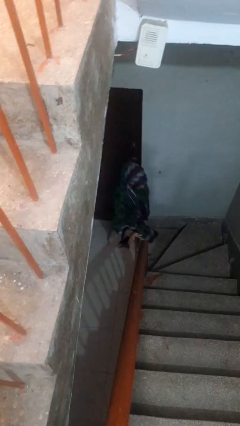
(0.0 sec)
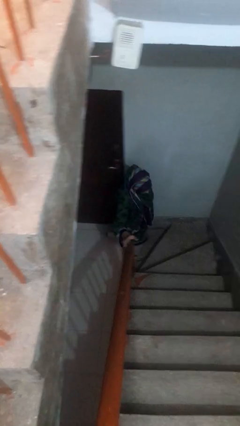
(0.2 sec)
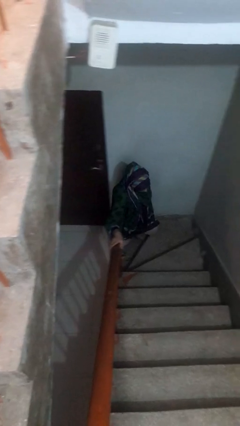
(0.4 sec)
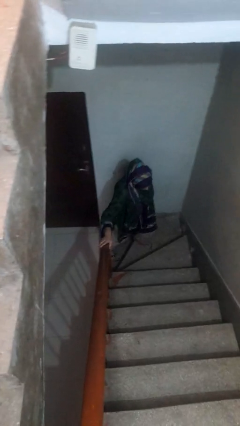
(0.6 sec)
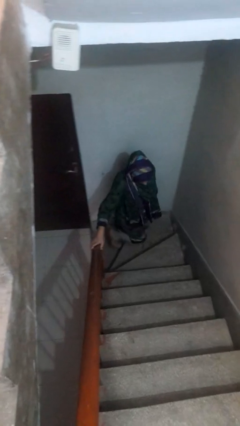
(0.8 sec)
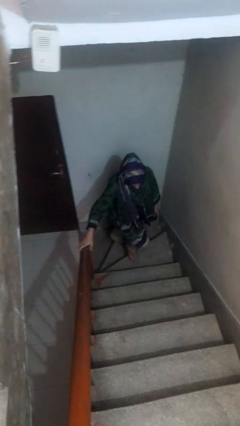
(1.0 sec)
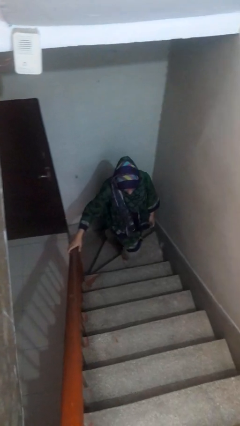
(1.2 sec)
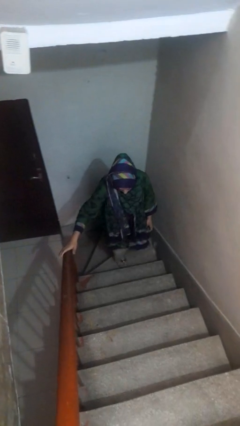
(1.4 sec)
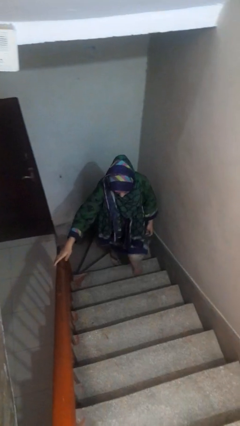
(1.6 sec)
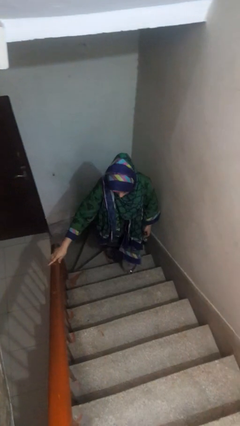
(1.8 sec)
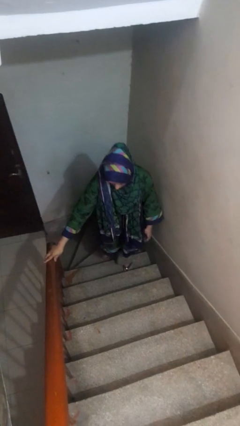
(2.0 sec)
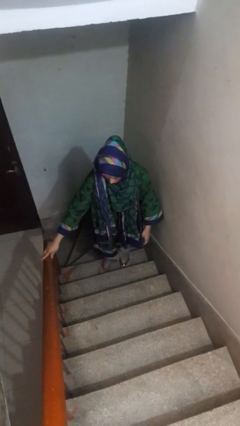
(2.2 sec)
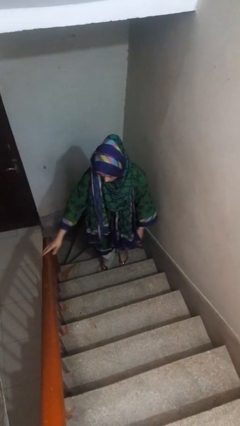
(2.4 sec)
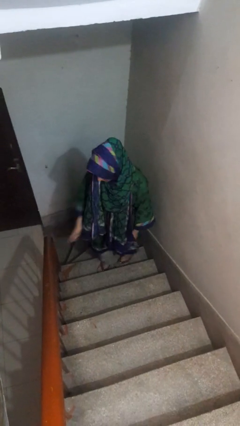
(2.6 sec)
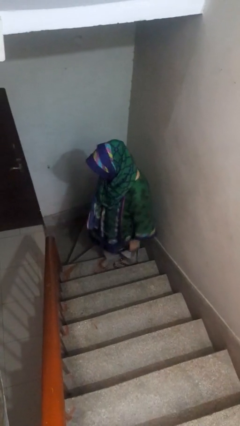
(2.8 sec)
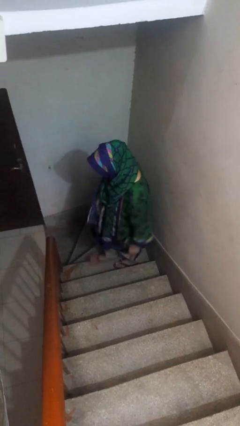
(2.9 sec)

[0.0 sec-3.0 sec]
person climbs up stairs

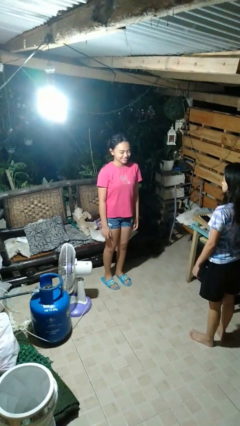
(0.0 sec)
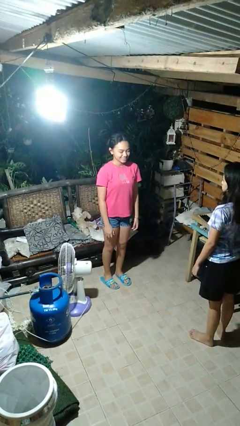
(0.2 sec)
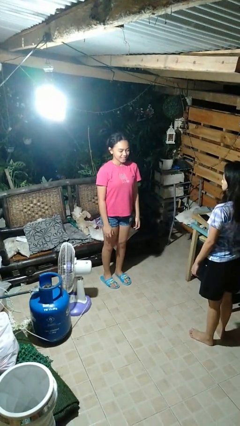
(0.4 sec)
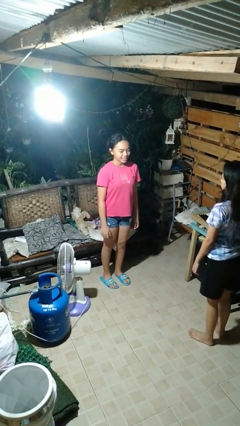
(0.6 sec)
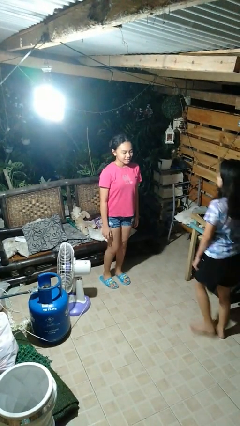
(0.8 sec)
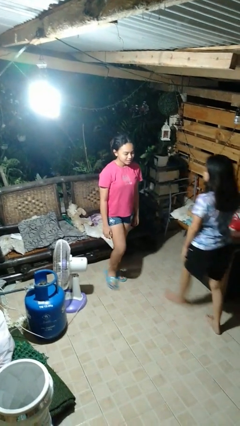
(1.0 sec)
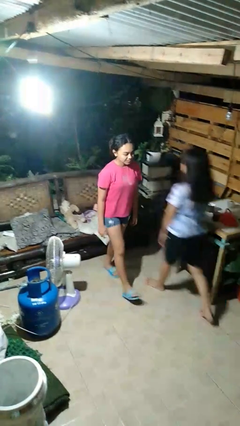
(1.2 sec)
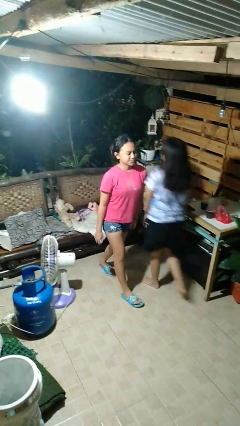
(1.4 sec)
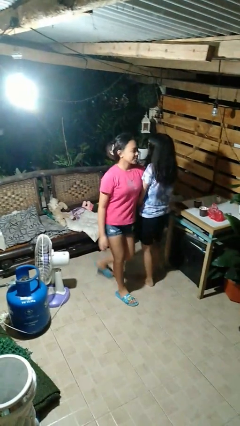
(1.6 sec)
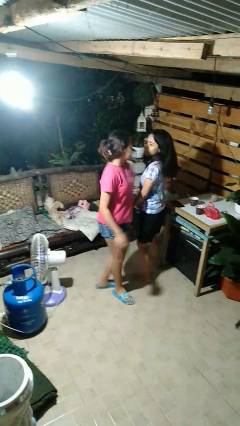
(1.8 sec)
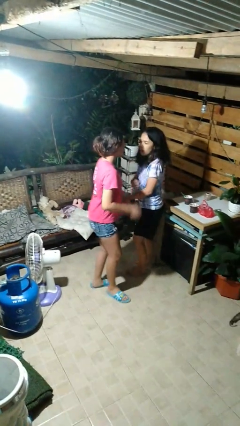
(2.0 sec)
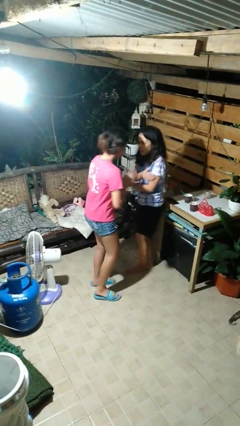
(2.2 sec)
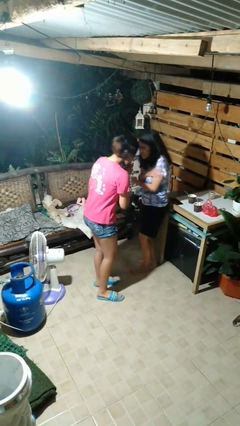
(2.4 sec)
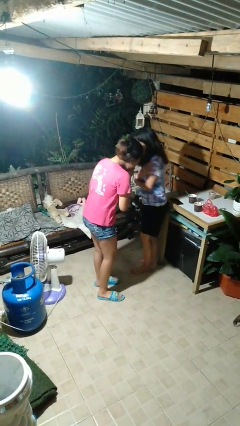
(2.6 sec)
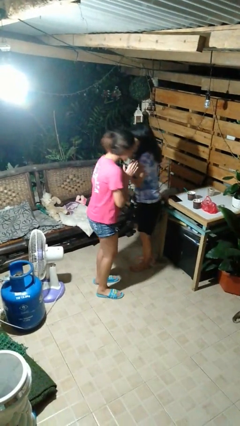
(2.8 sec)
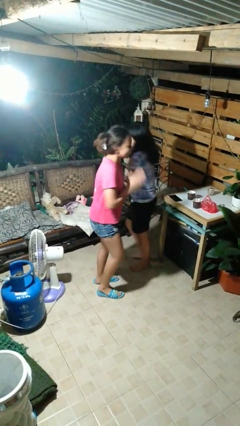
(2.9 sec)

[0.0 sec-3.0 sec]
person bumps into person

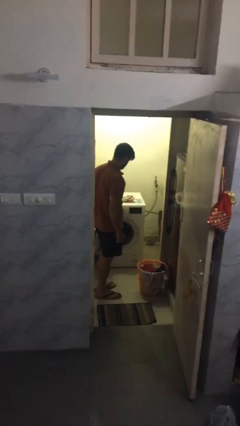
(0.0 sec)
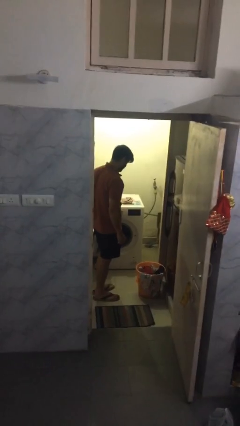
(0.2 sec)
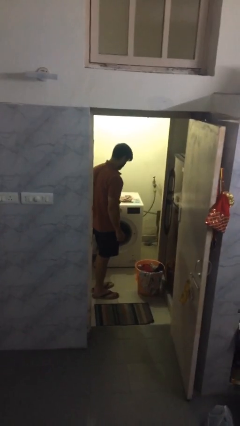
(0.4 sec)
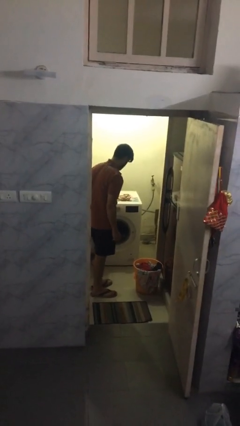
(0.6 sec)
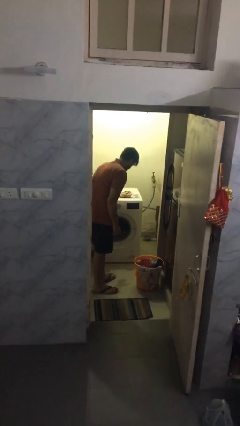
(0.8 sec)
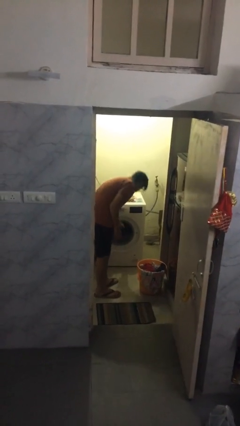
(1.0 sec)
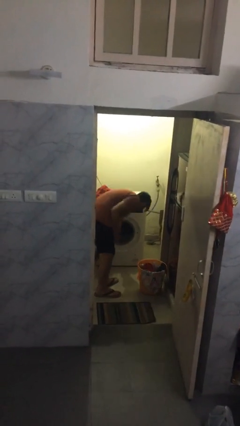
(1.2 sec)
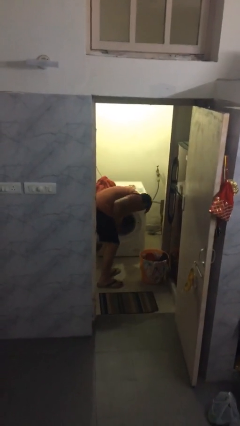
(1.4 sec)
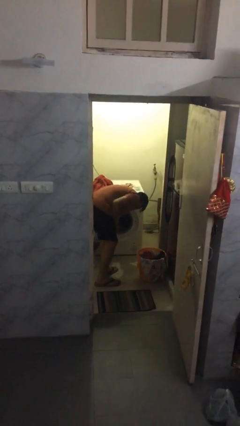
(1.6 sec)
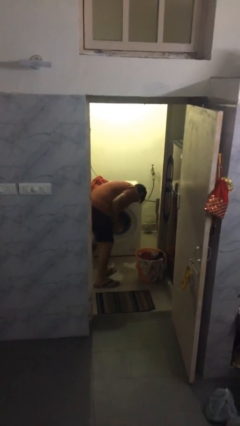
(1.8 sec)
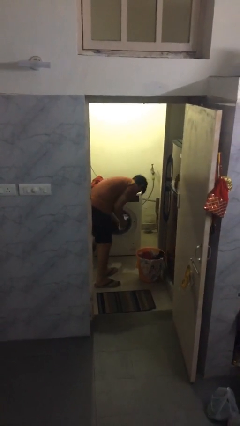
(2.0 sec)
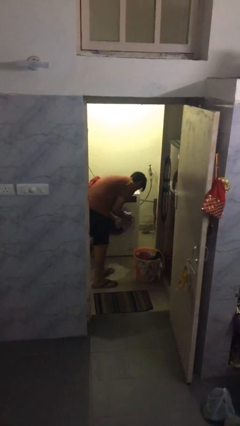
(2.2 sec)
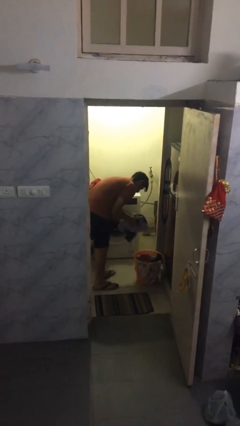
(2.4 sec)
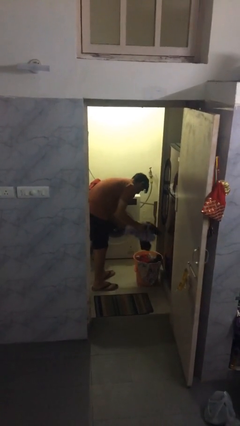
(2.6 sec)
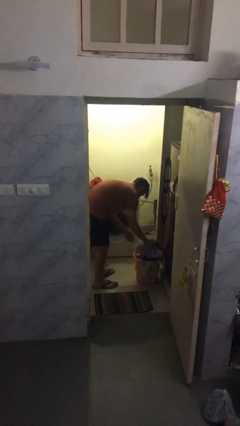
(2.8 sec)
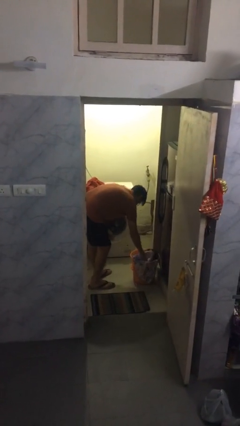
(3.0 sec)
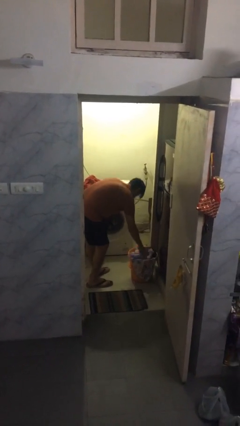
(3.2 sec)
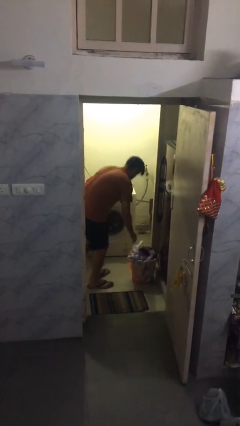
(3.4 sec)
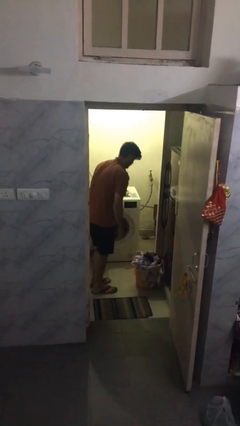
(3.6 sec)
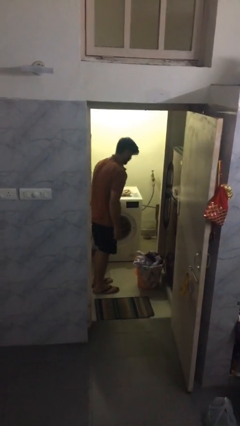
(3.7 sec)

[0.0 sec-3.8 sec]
person unloads clotheswasher

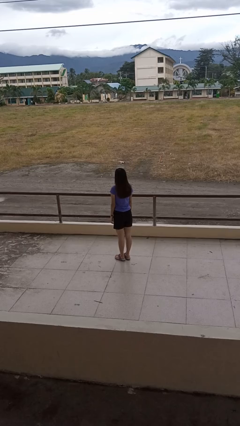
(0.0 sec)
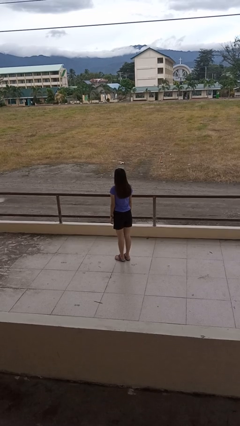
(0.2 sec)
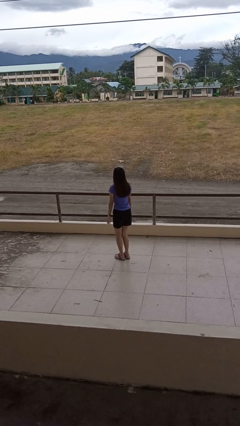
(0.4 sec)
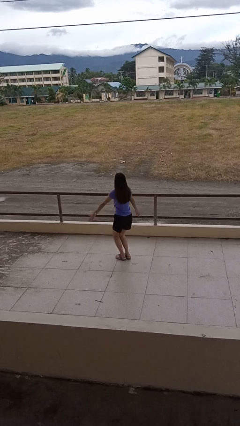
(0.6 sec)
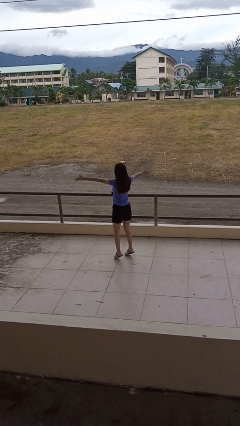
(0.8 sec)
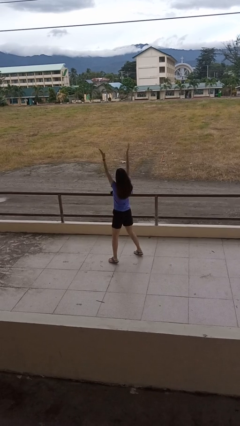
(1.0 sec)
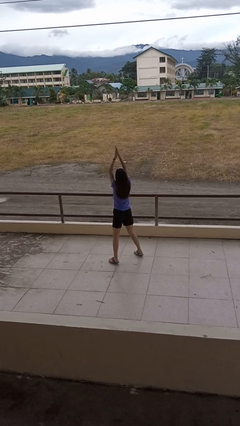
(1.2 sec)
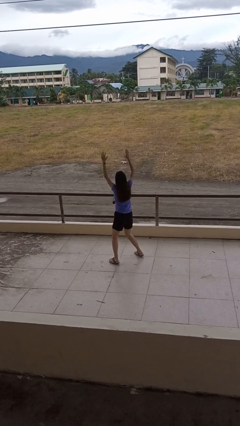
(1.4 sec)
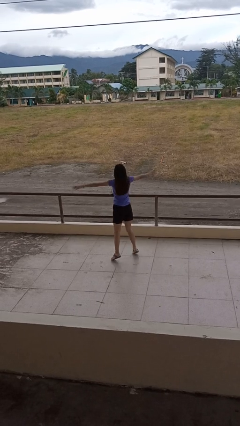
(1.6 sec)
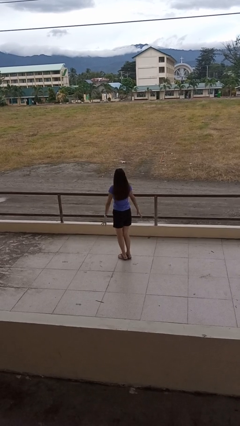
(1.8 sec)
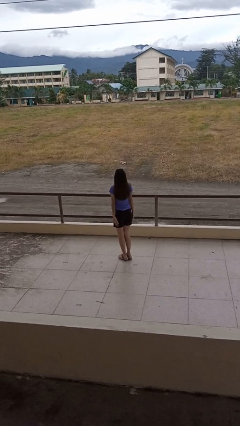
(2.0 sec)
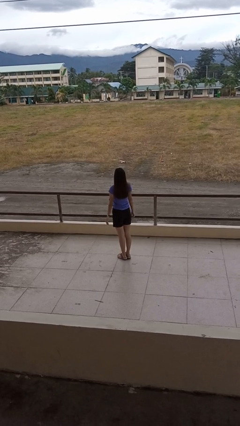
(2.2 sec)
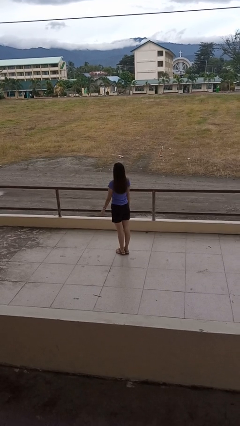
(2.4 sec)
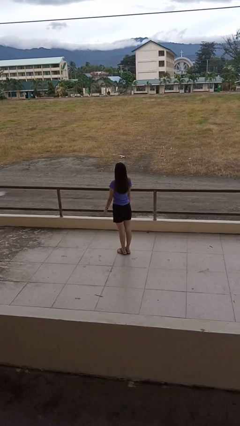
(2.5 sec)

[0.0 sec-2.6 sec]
person exercises with jumping jacks

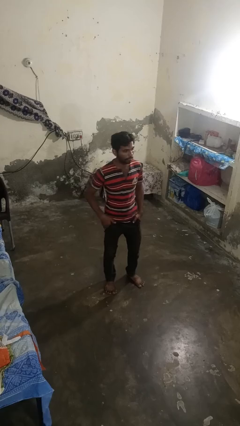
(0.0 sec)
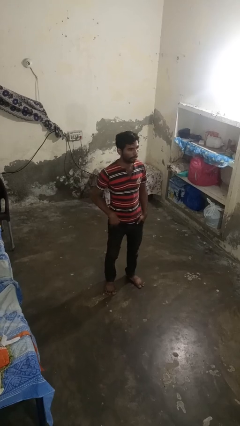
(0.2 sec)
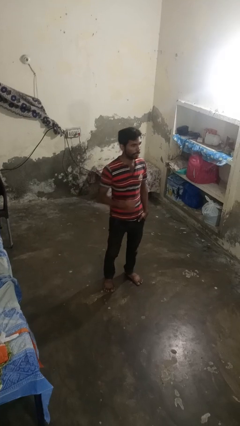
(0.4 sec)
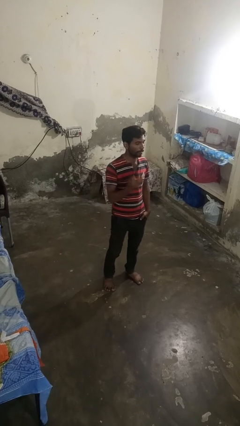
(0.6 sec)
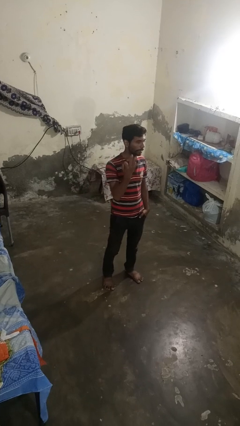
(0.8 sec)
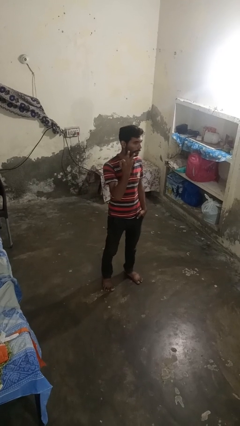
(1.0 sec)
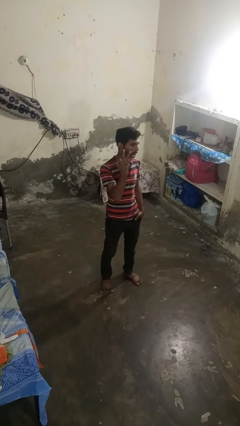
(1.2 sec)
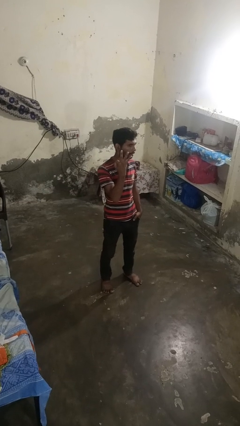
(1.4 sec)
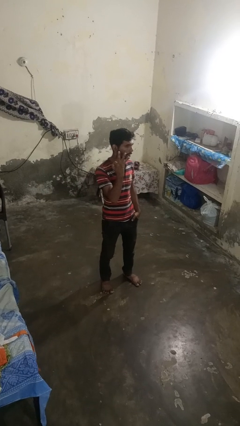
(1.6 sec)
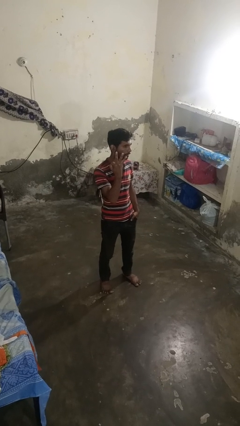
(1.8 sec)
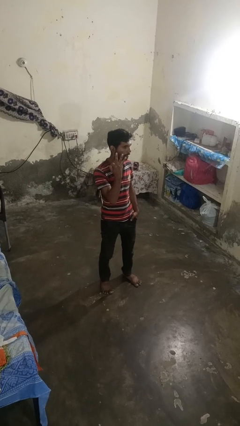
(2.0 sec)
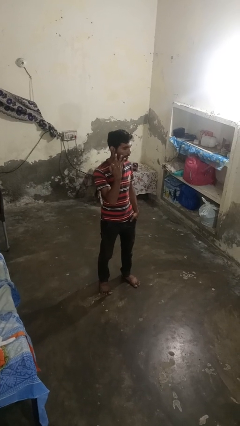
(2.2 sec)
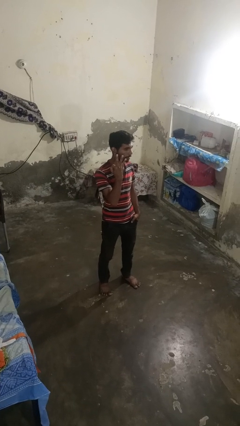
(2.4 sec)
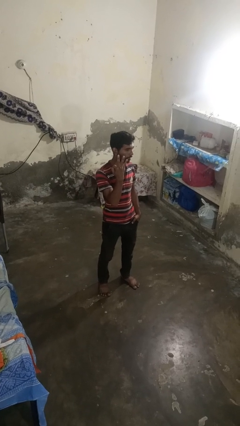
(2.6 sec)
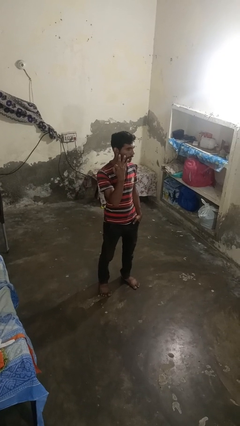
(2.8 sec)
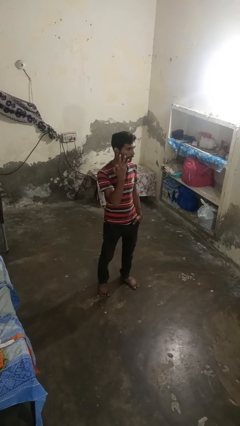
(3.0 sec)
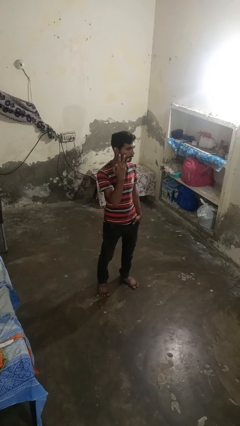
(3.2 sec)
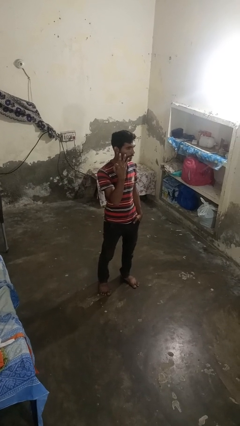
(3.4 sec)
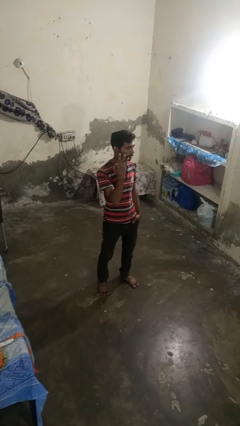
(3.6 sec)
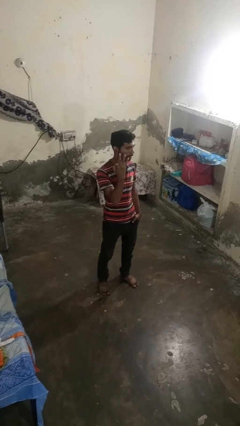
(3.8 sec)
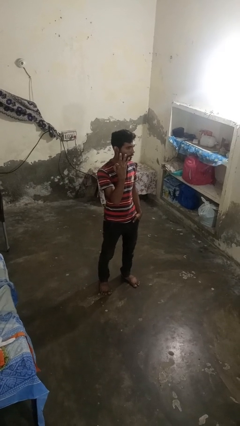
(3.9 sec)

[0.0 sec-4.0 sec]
person gestures number three

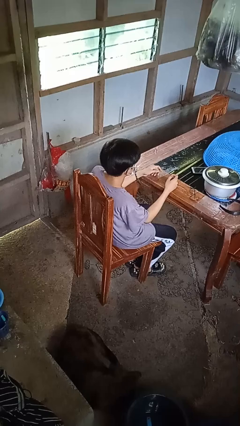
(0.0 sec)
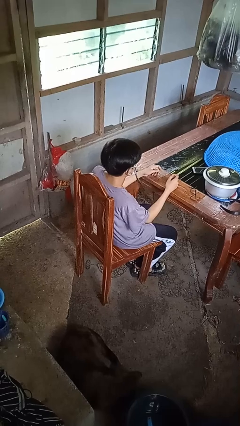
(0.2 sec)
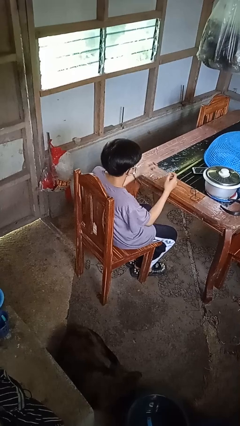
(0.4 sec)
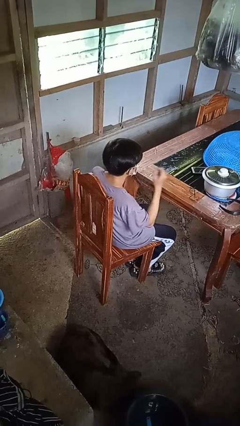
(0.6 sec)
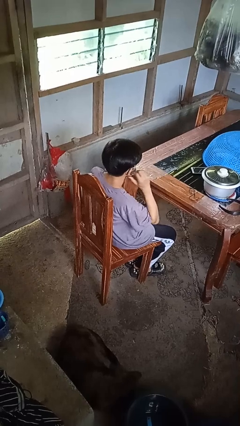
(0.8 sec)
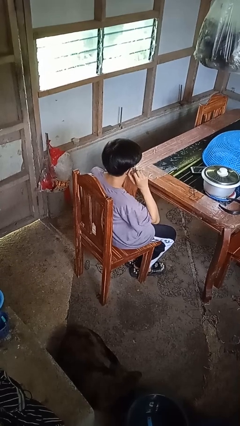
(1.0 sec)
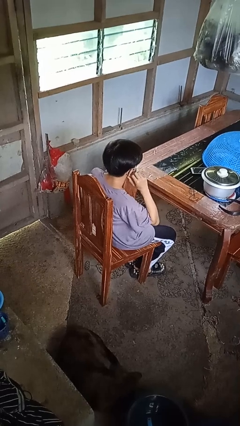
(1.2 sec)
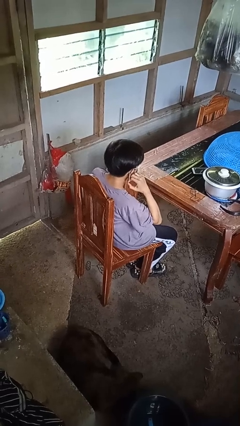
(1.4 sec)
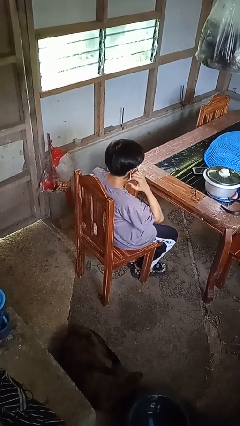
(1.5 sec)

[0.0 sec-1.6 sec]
person takes off facemask
